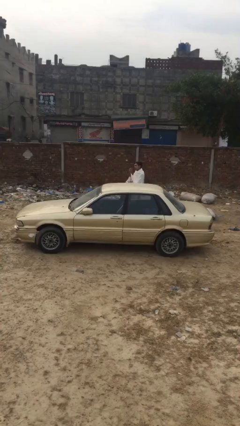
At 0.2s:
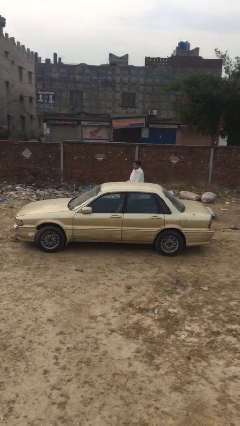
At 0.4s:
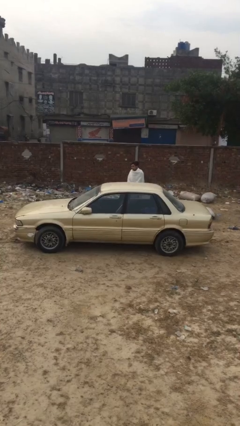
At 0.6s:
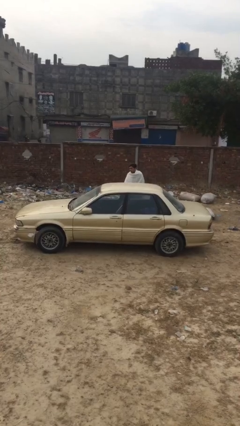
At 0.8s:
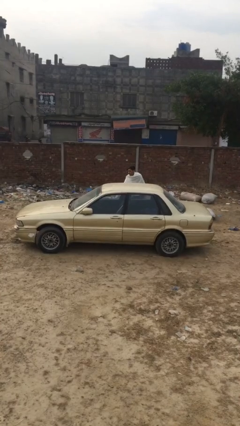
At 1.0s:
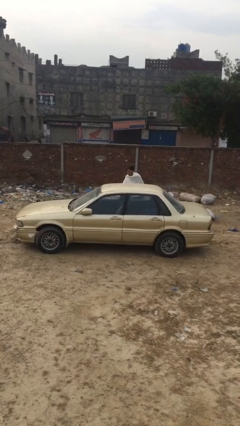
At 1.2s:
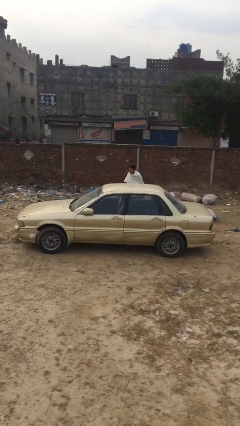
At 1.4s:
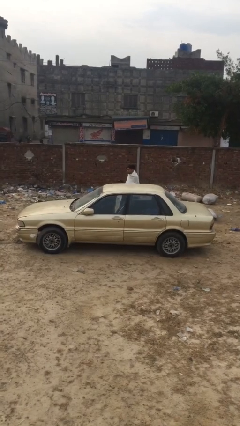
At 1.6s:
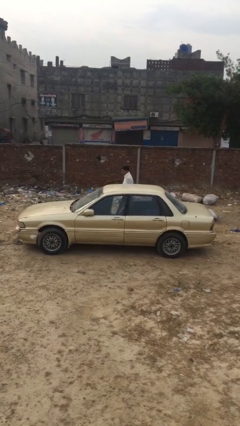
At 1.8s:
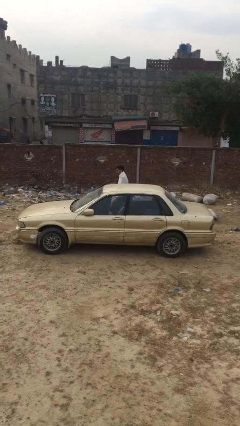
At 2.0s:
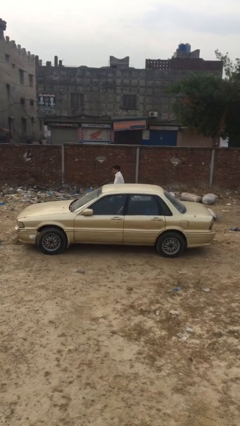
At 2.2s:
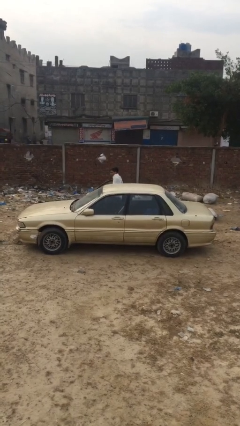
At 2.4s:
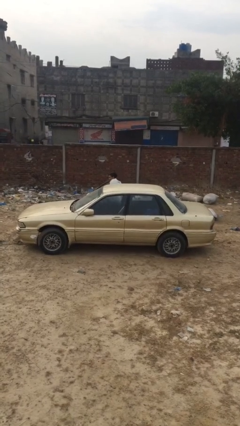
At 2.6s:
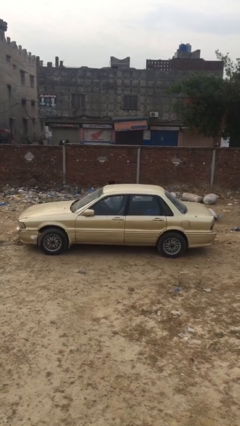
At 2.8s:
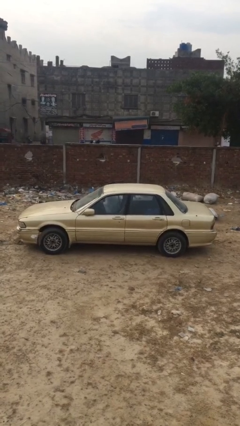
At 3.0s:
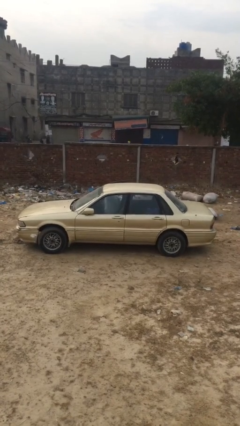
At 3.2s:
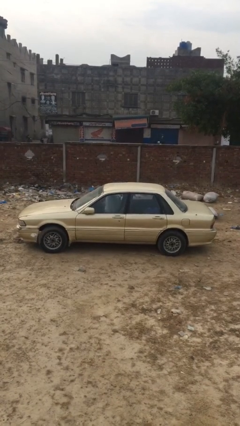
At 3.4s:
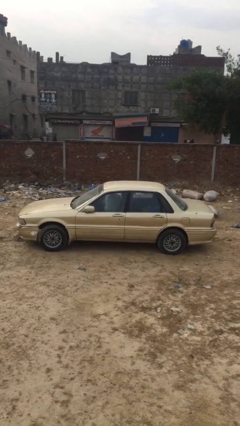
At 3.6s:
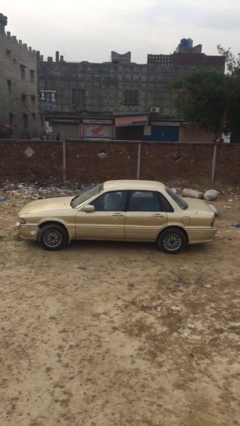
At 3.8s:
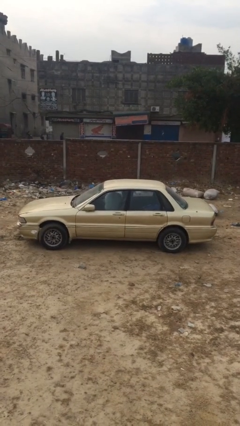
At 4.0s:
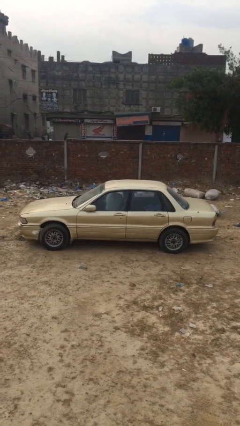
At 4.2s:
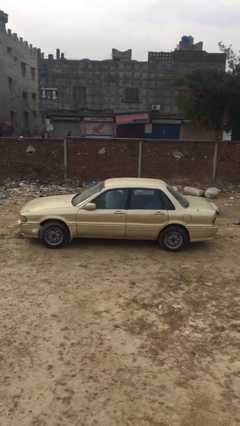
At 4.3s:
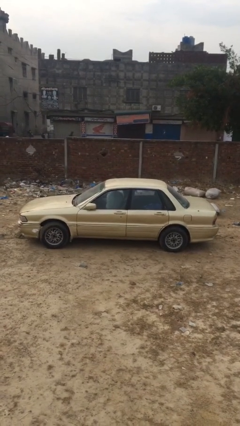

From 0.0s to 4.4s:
car picks up person

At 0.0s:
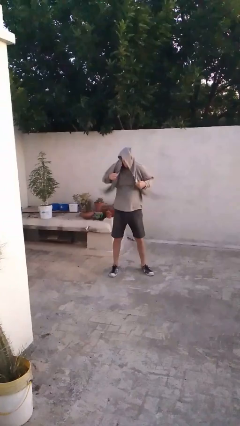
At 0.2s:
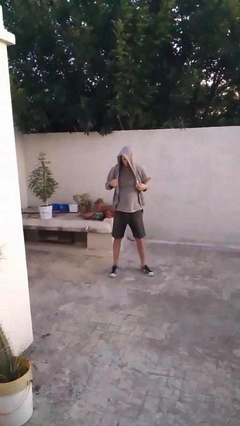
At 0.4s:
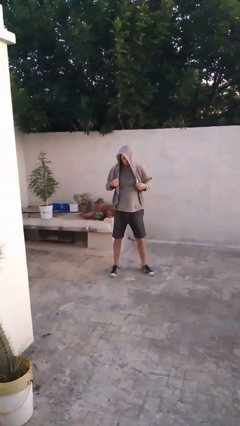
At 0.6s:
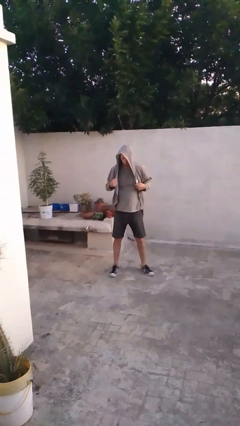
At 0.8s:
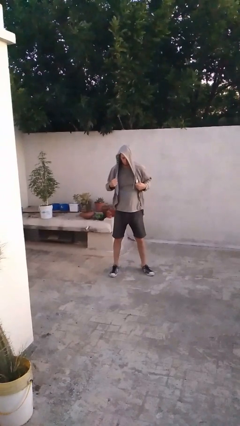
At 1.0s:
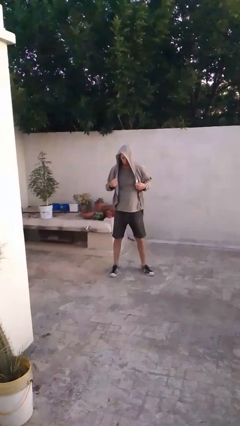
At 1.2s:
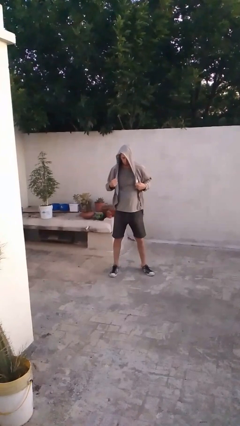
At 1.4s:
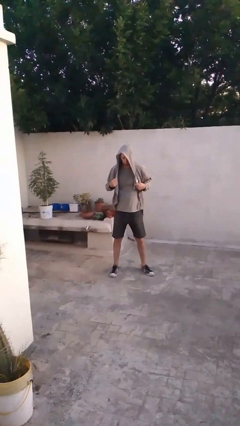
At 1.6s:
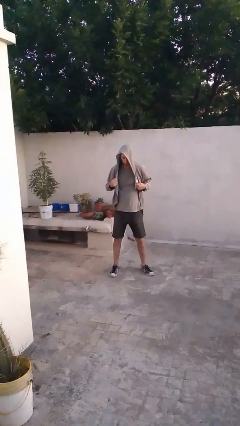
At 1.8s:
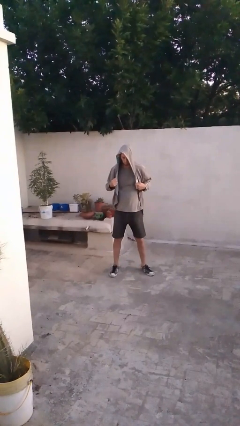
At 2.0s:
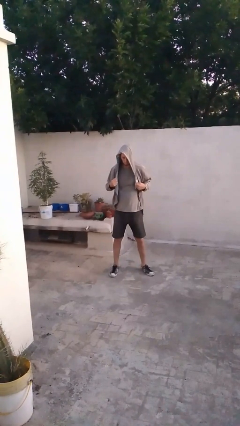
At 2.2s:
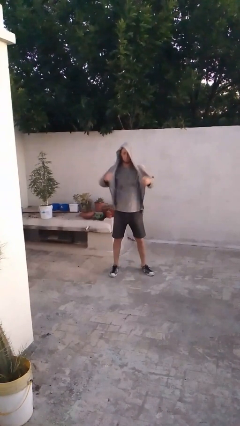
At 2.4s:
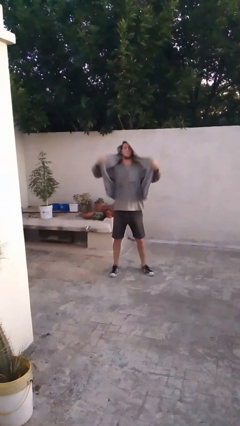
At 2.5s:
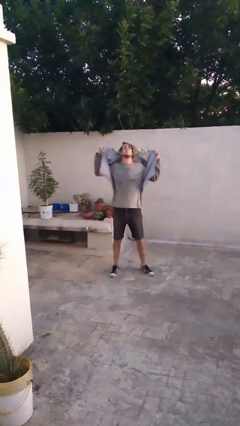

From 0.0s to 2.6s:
person puts on hoodie

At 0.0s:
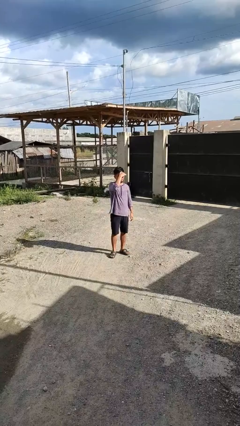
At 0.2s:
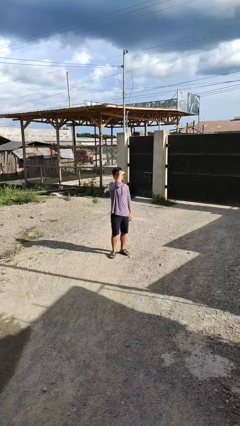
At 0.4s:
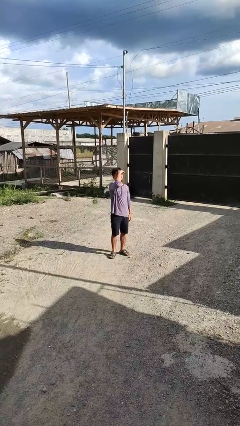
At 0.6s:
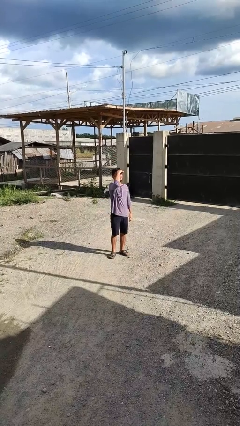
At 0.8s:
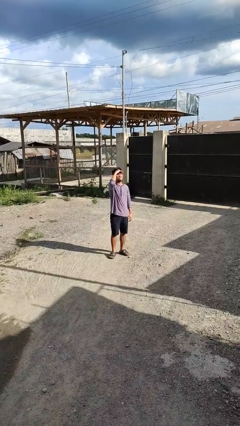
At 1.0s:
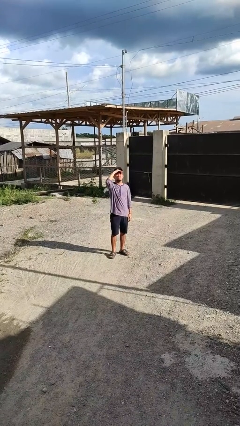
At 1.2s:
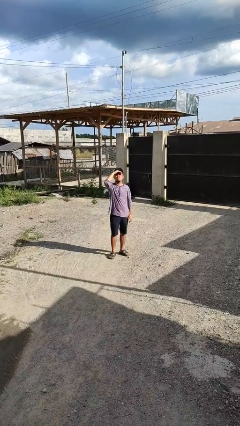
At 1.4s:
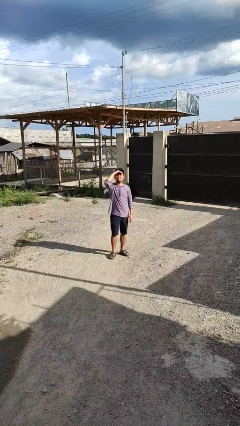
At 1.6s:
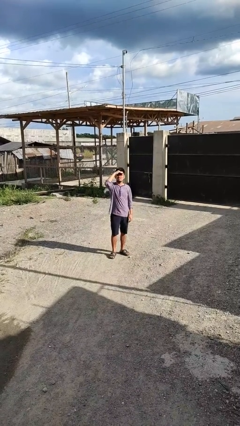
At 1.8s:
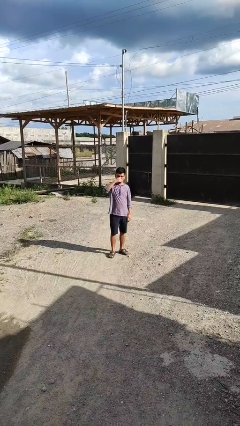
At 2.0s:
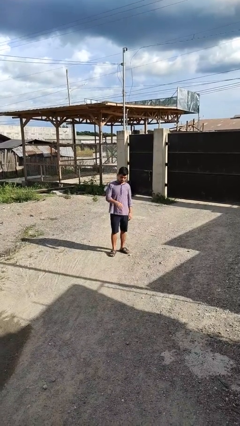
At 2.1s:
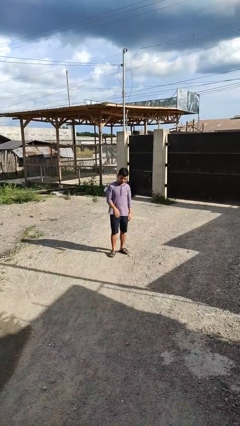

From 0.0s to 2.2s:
person shades eyes

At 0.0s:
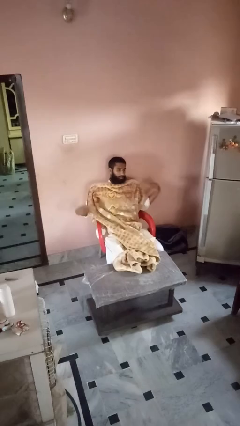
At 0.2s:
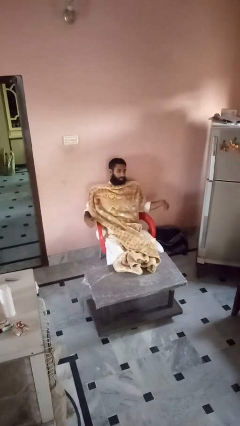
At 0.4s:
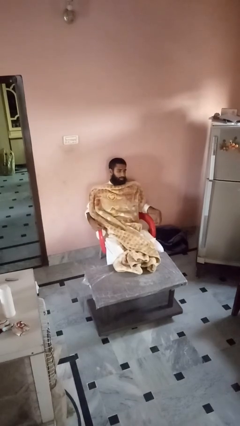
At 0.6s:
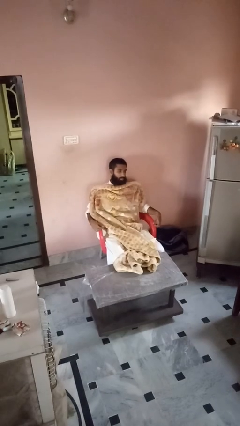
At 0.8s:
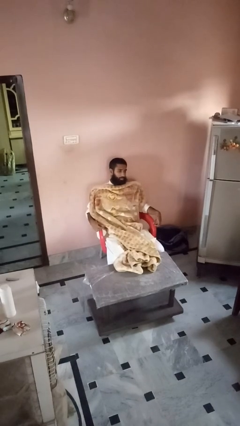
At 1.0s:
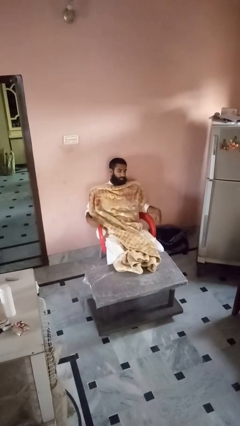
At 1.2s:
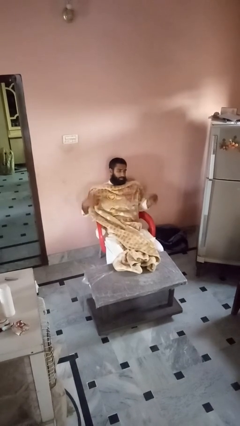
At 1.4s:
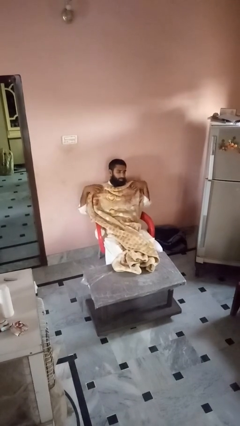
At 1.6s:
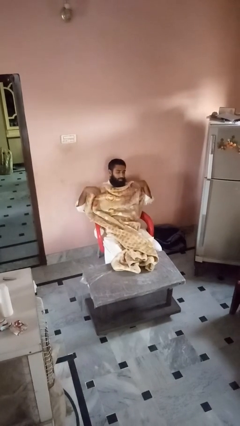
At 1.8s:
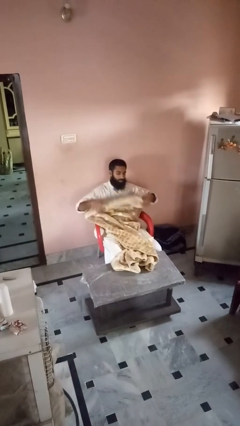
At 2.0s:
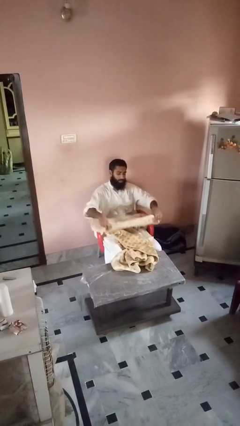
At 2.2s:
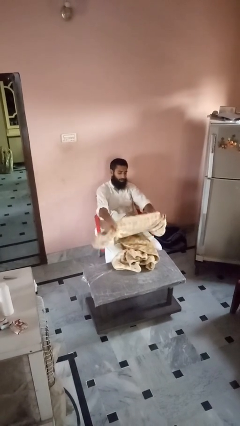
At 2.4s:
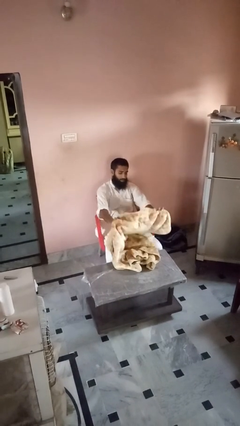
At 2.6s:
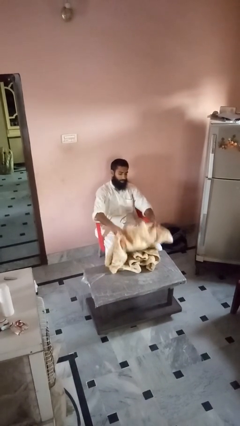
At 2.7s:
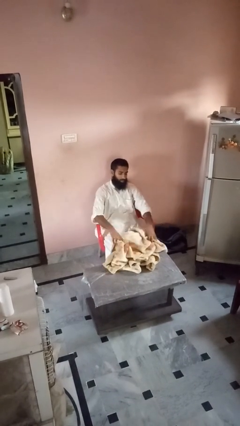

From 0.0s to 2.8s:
person uncovers with blanket

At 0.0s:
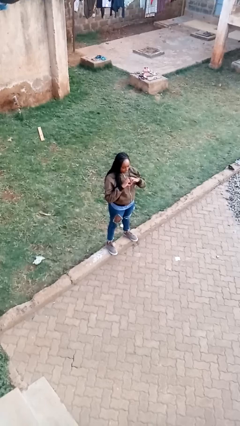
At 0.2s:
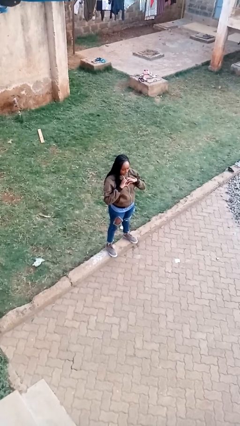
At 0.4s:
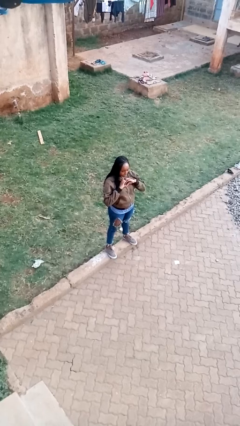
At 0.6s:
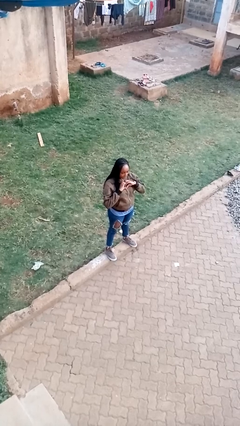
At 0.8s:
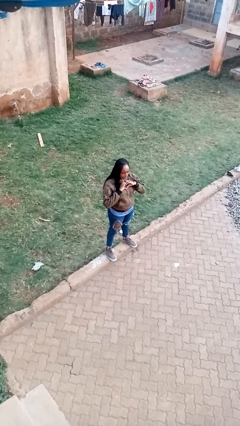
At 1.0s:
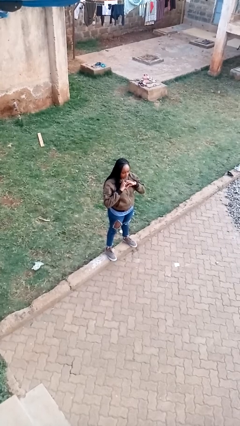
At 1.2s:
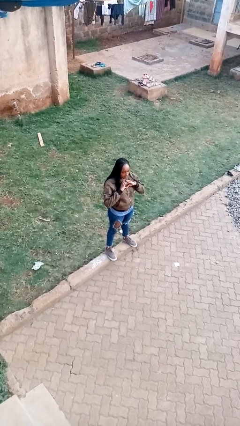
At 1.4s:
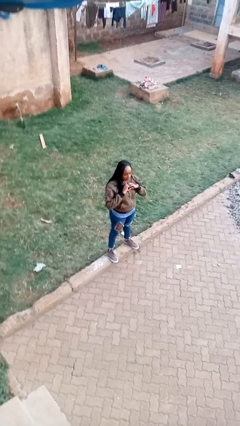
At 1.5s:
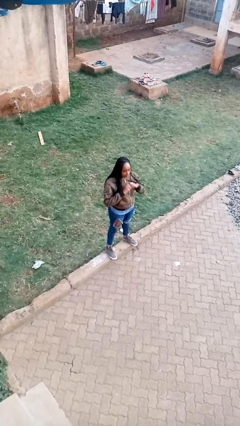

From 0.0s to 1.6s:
person gestures heart

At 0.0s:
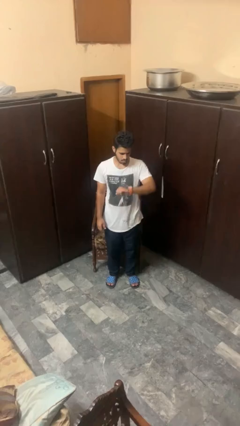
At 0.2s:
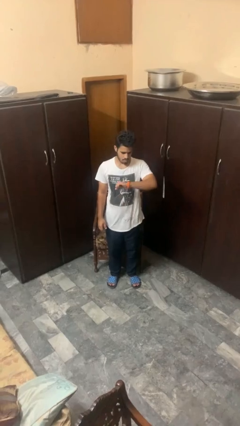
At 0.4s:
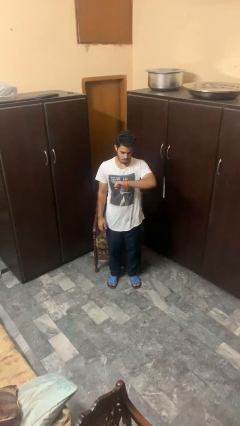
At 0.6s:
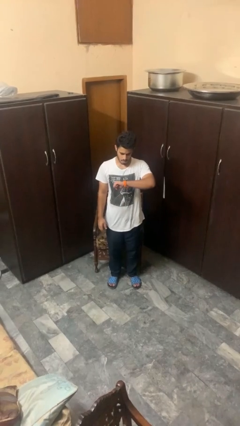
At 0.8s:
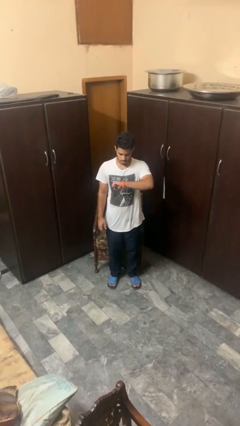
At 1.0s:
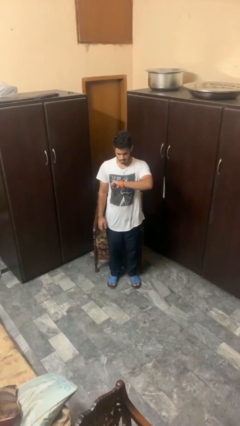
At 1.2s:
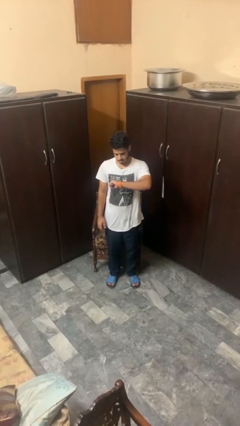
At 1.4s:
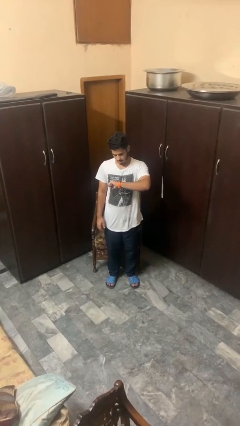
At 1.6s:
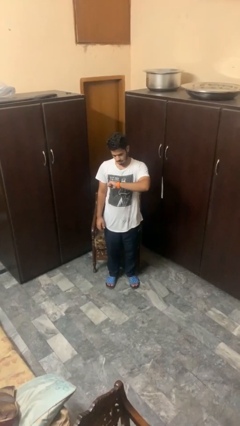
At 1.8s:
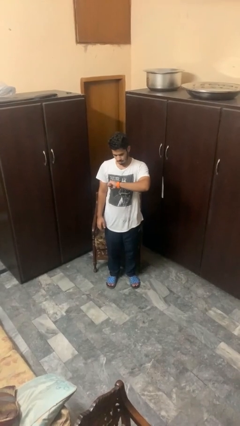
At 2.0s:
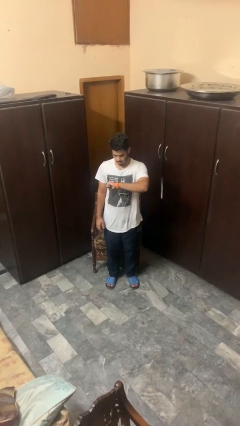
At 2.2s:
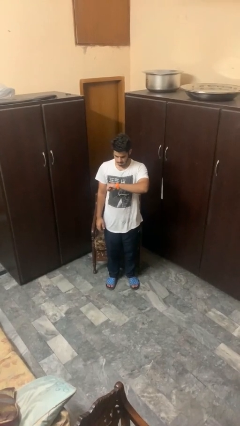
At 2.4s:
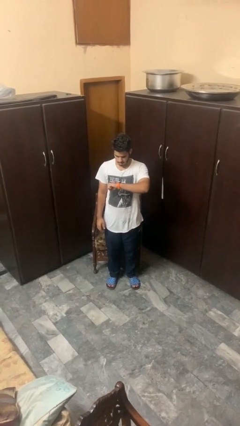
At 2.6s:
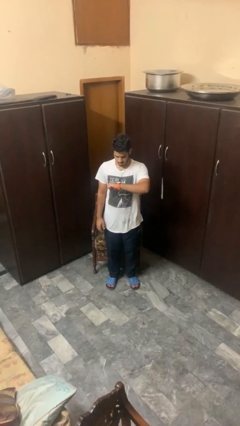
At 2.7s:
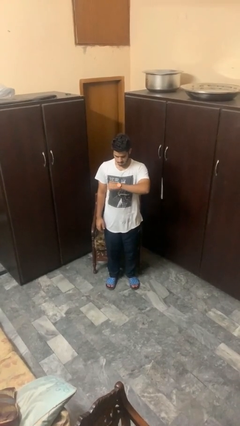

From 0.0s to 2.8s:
person looks at wristwatch

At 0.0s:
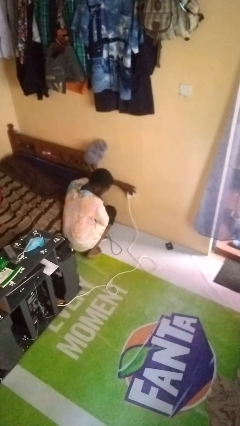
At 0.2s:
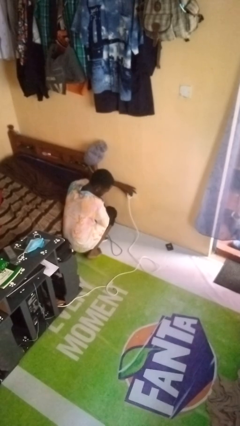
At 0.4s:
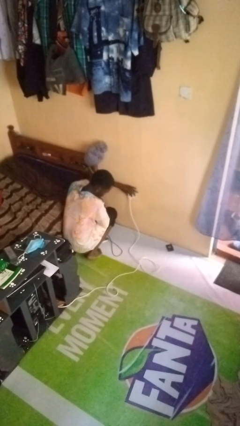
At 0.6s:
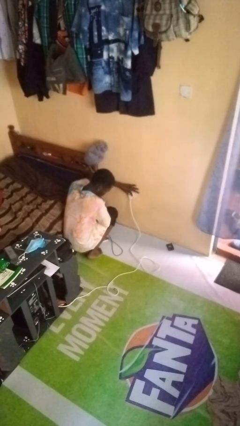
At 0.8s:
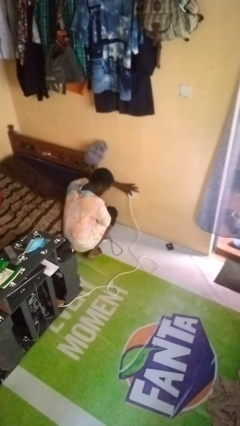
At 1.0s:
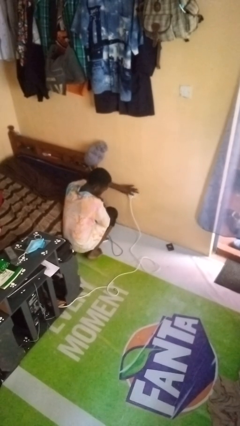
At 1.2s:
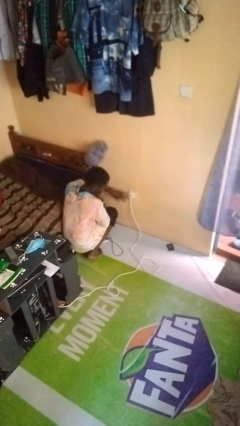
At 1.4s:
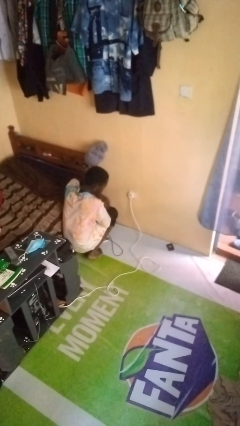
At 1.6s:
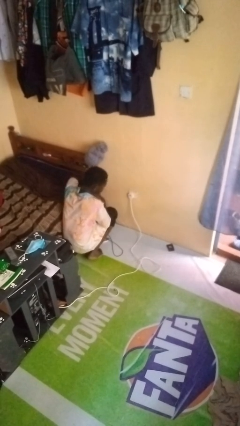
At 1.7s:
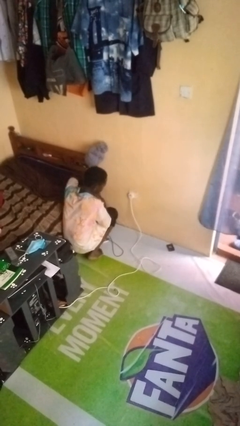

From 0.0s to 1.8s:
person plugs into electrical socket
